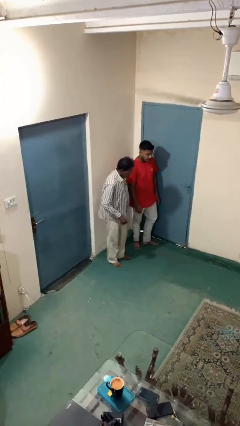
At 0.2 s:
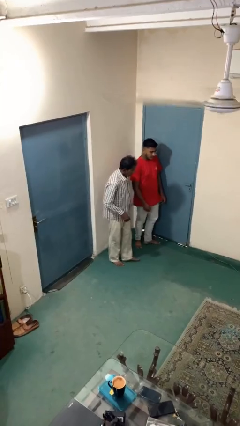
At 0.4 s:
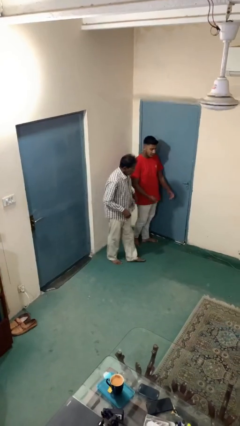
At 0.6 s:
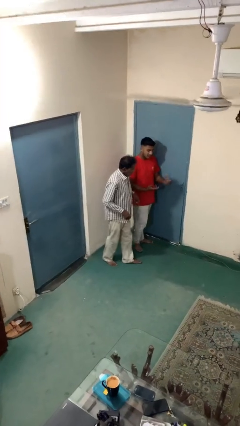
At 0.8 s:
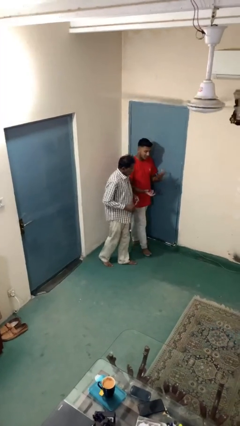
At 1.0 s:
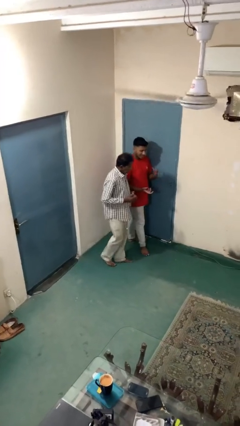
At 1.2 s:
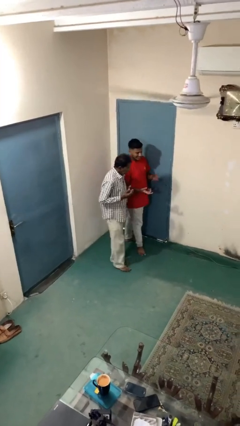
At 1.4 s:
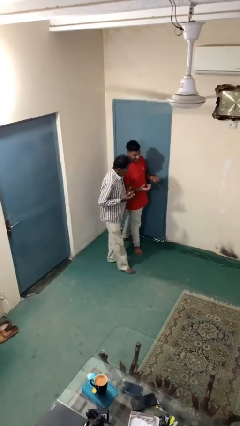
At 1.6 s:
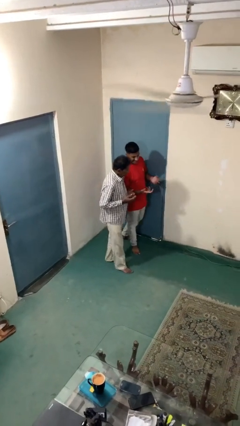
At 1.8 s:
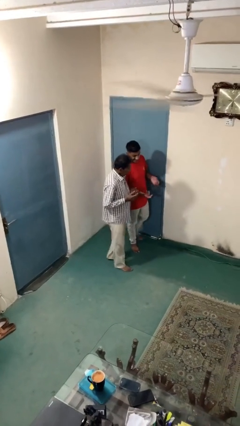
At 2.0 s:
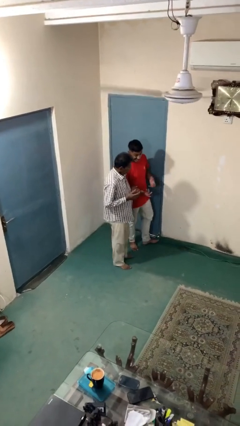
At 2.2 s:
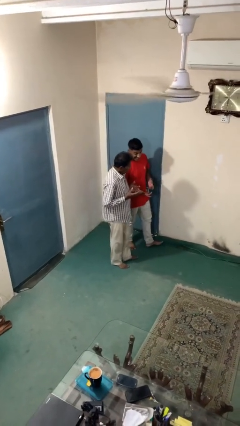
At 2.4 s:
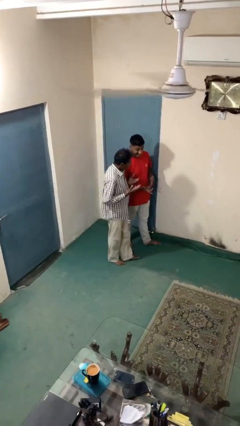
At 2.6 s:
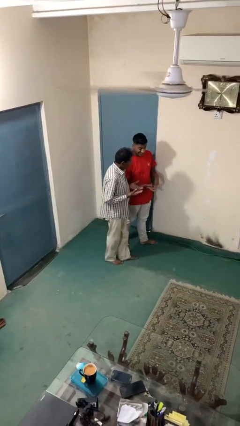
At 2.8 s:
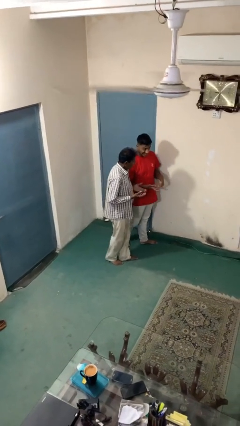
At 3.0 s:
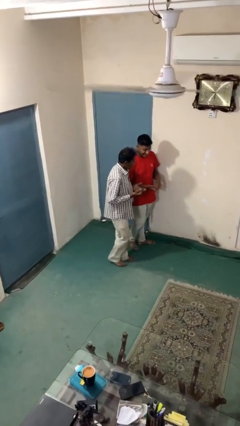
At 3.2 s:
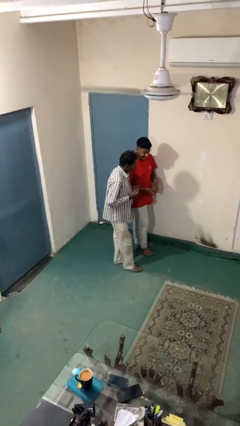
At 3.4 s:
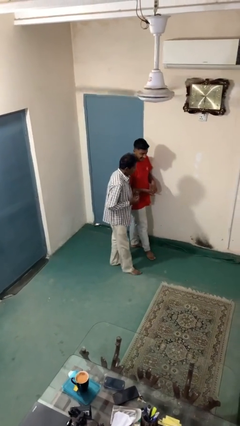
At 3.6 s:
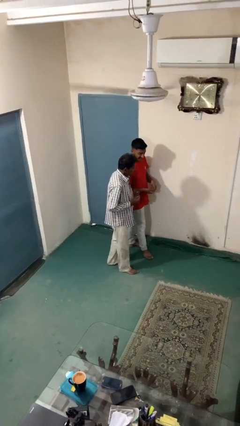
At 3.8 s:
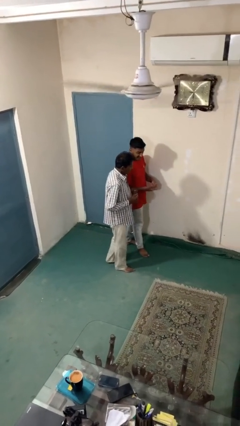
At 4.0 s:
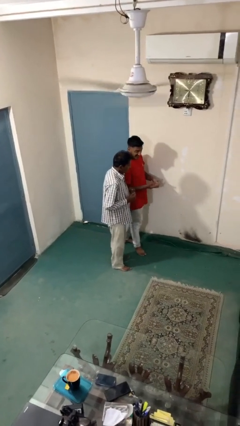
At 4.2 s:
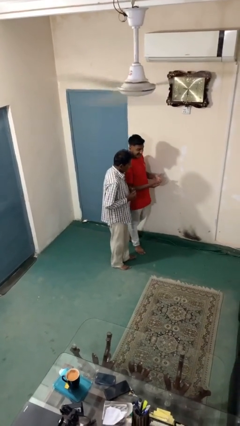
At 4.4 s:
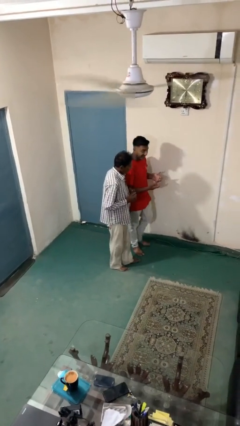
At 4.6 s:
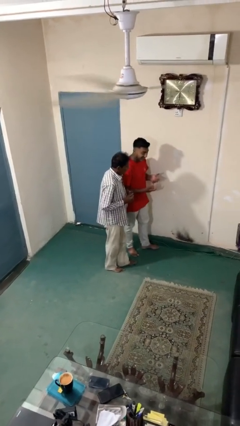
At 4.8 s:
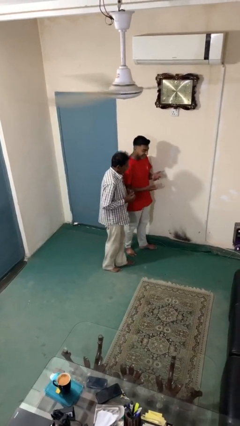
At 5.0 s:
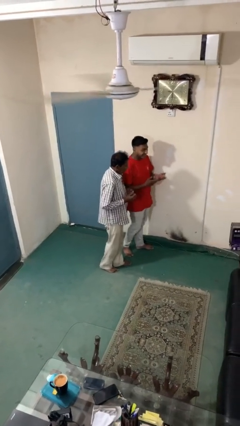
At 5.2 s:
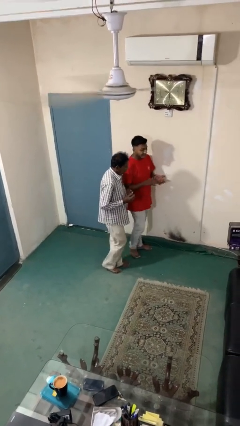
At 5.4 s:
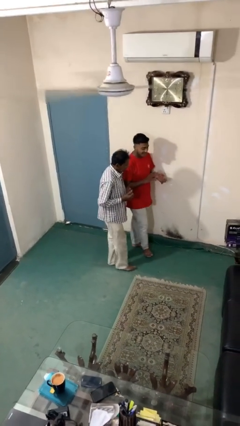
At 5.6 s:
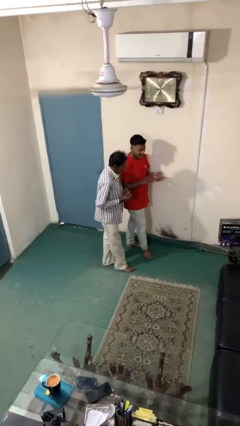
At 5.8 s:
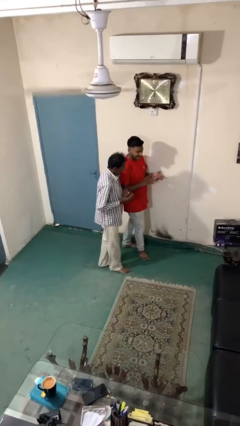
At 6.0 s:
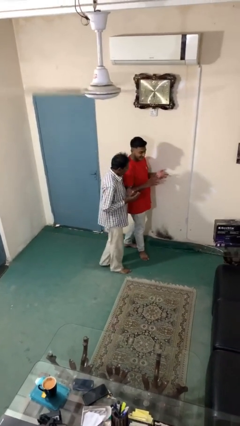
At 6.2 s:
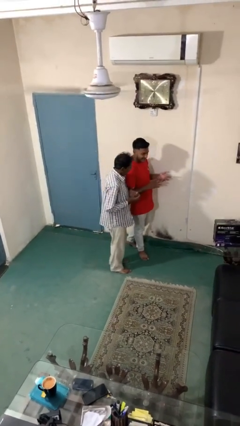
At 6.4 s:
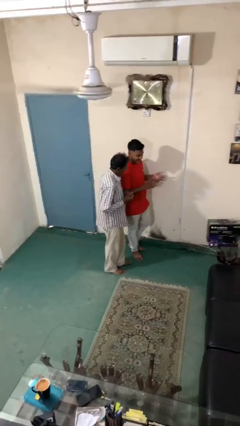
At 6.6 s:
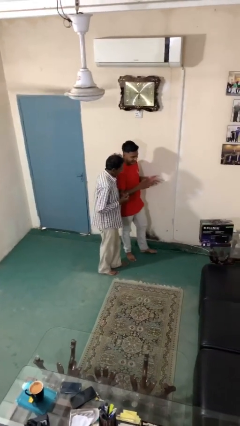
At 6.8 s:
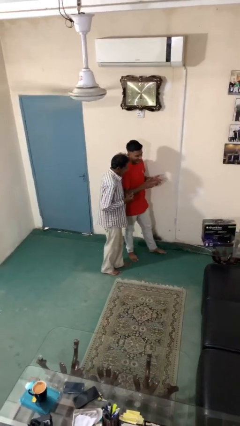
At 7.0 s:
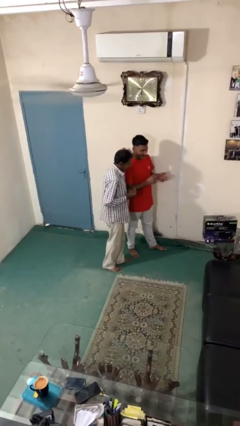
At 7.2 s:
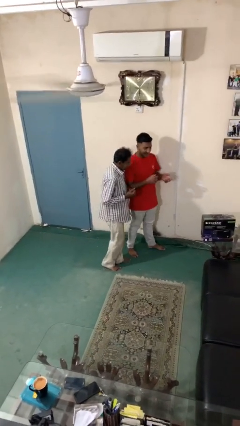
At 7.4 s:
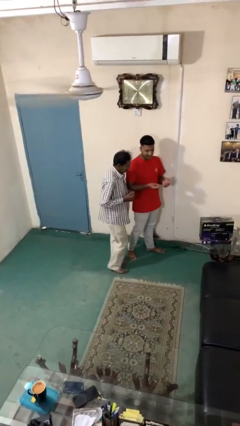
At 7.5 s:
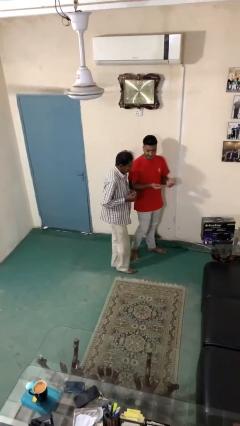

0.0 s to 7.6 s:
person talks to person

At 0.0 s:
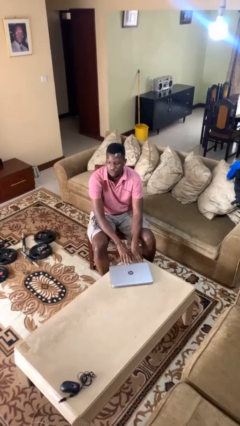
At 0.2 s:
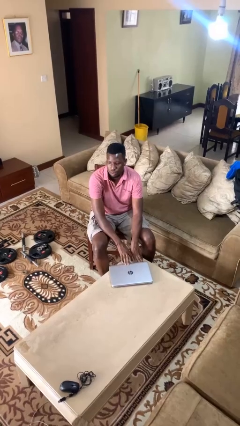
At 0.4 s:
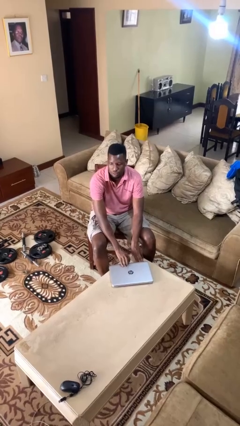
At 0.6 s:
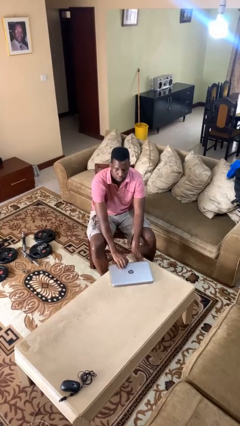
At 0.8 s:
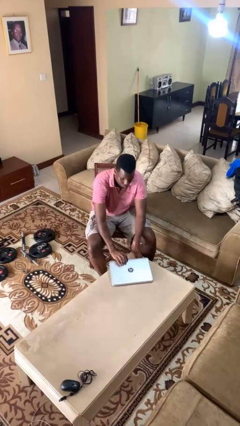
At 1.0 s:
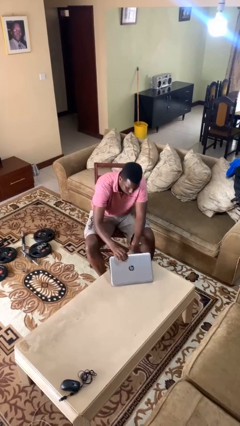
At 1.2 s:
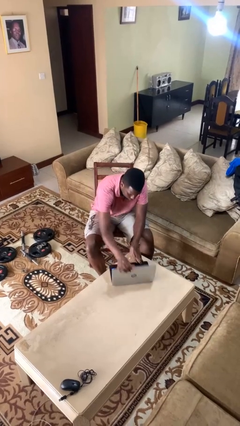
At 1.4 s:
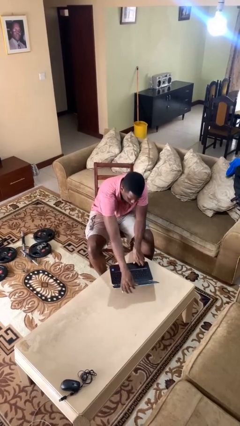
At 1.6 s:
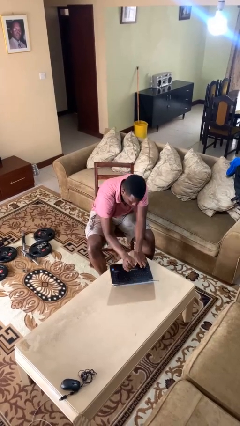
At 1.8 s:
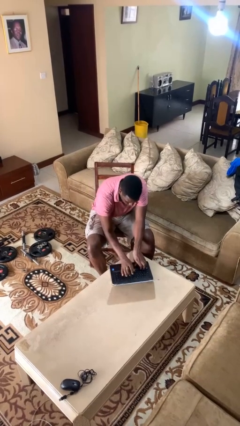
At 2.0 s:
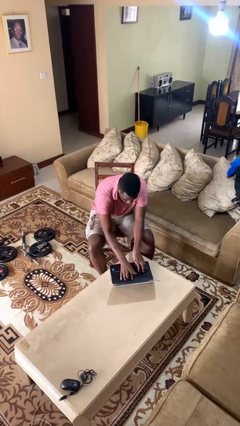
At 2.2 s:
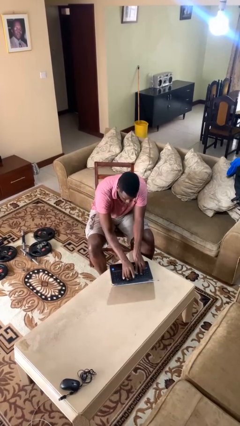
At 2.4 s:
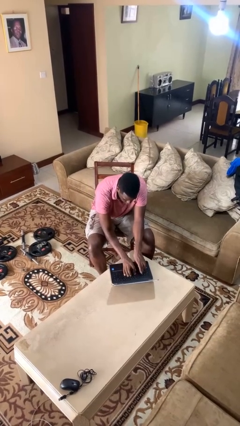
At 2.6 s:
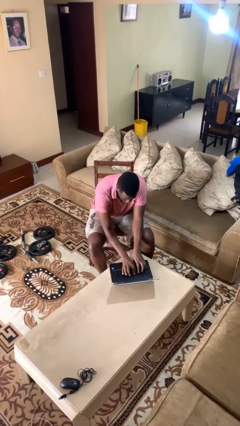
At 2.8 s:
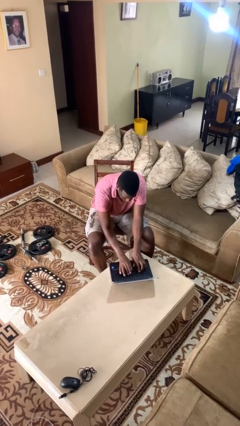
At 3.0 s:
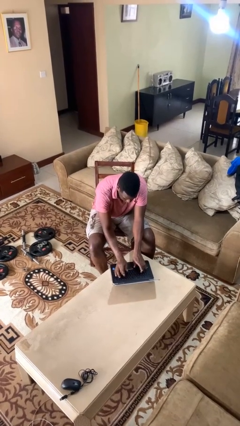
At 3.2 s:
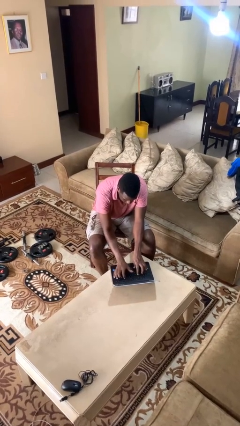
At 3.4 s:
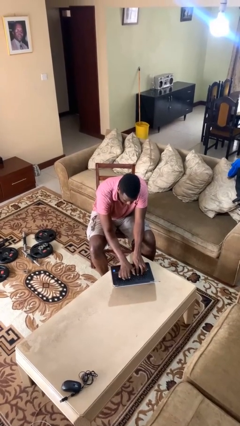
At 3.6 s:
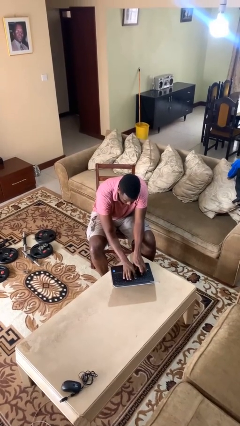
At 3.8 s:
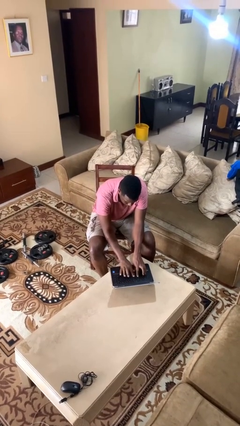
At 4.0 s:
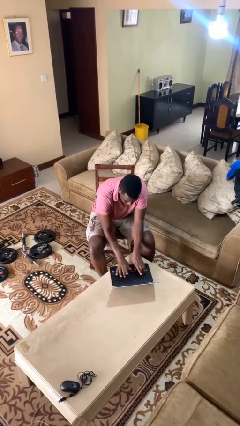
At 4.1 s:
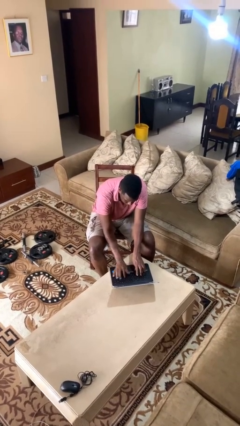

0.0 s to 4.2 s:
person interacts with laptop

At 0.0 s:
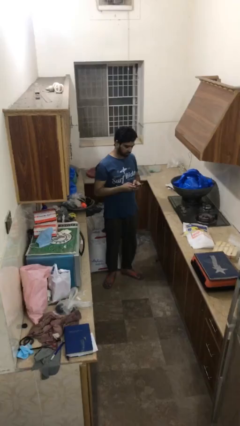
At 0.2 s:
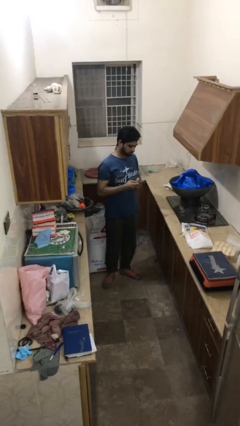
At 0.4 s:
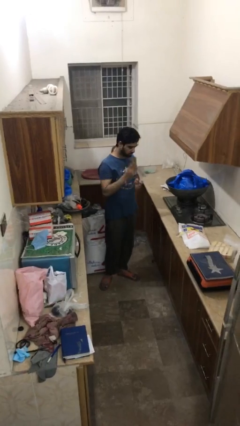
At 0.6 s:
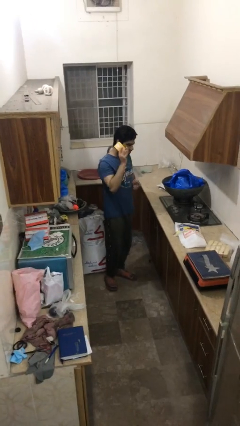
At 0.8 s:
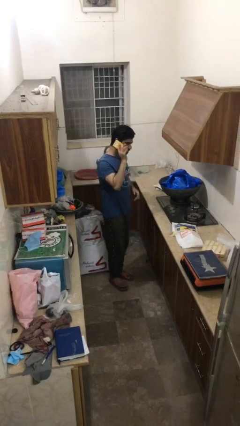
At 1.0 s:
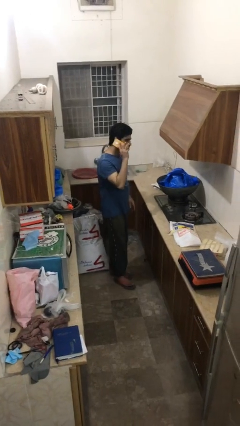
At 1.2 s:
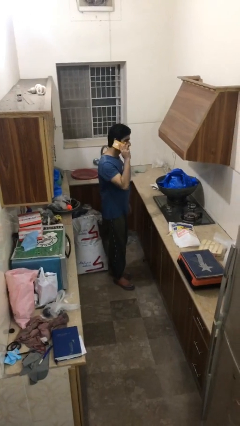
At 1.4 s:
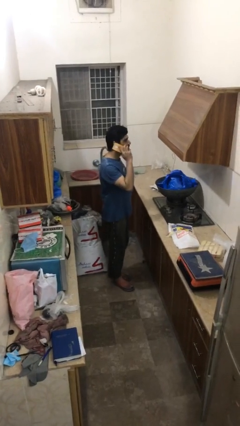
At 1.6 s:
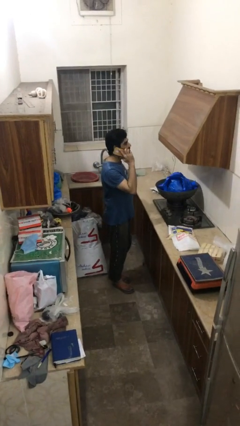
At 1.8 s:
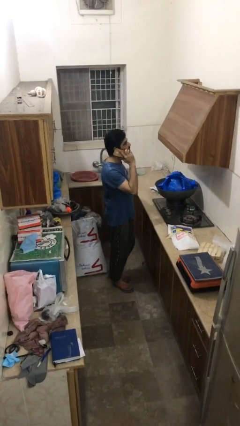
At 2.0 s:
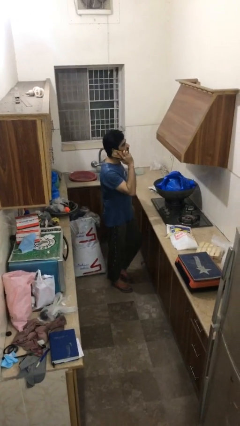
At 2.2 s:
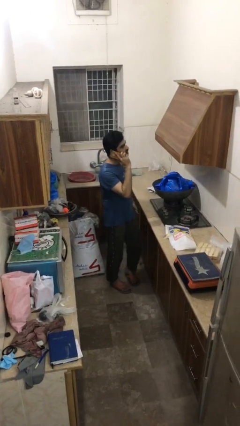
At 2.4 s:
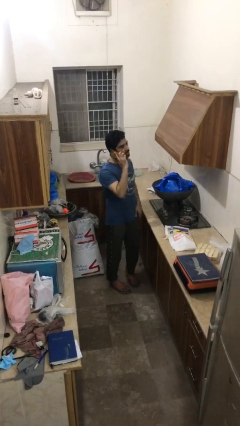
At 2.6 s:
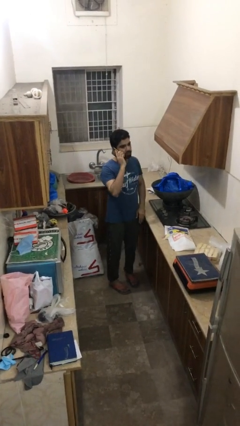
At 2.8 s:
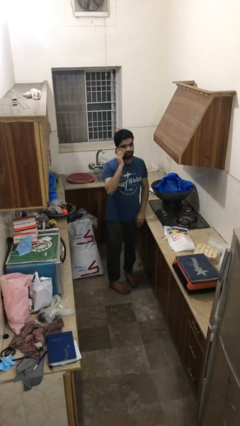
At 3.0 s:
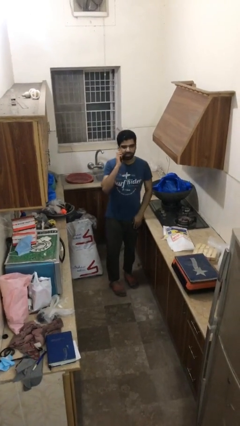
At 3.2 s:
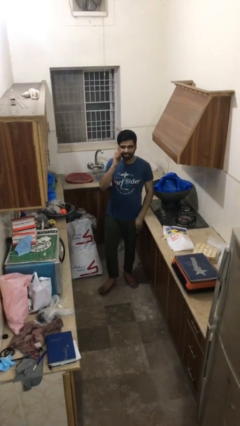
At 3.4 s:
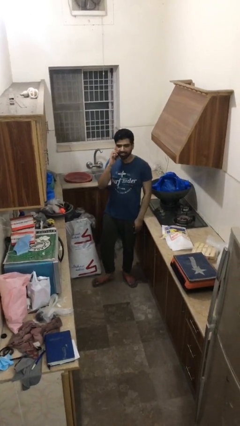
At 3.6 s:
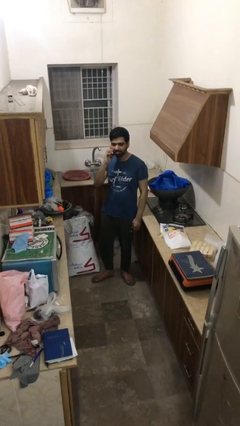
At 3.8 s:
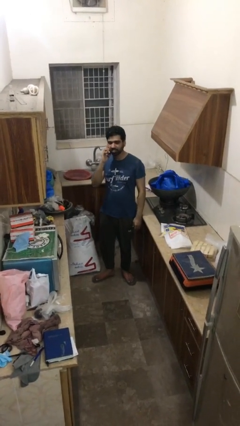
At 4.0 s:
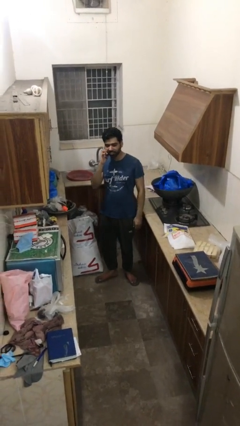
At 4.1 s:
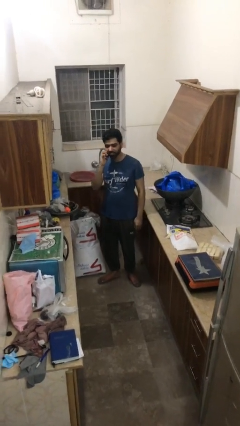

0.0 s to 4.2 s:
person talks on phone

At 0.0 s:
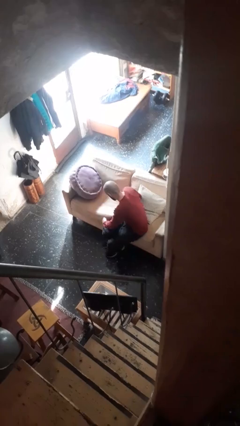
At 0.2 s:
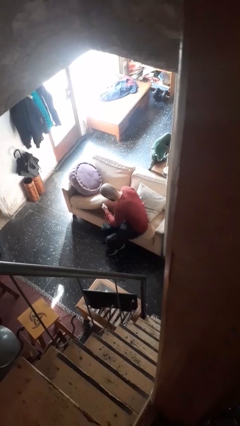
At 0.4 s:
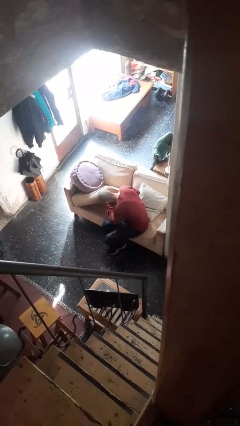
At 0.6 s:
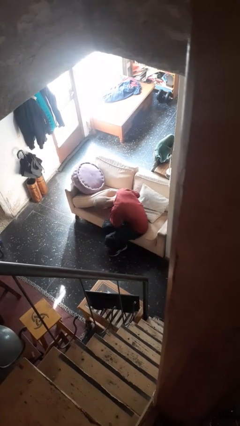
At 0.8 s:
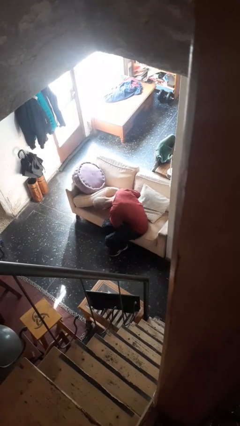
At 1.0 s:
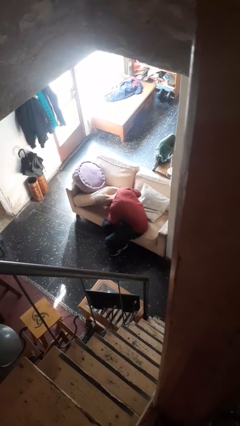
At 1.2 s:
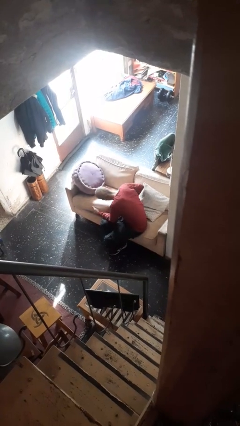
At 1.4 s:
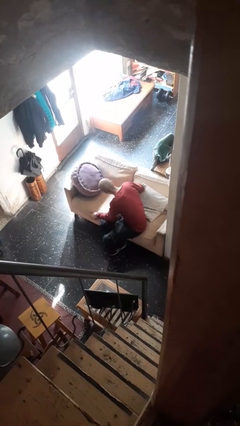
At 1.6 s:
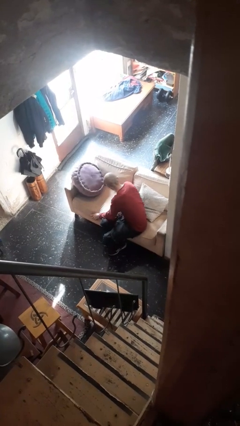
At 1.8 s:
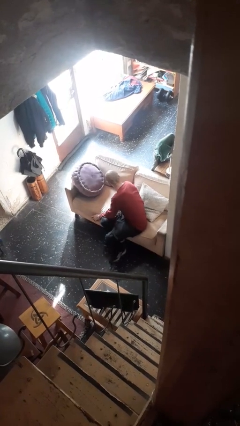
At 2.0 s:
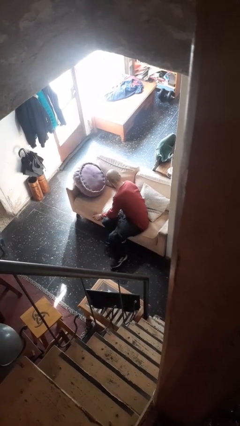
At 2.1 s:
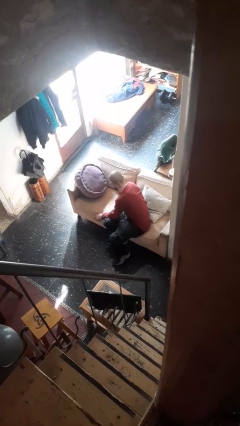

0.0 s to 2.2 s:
person searches in couch
